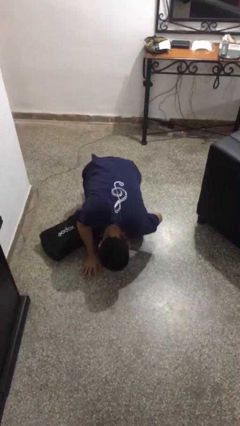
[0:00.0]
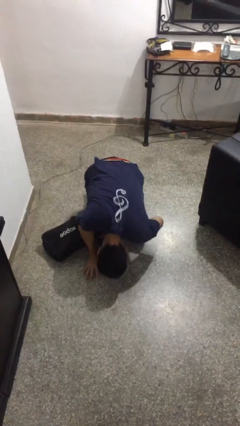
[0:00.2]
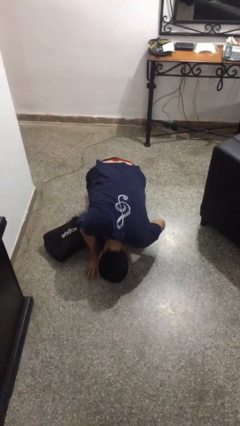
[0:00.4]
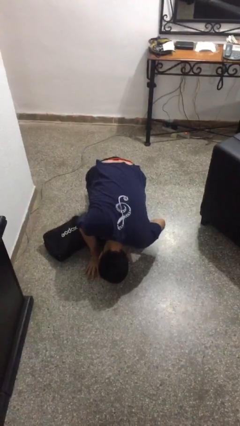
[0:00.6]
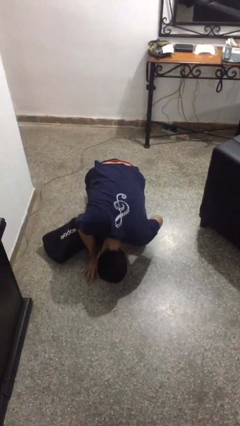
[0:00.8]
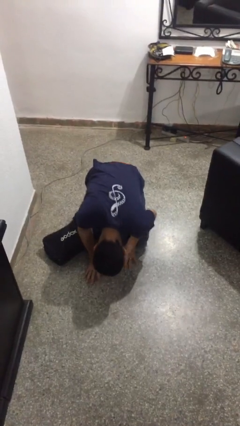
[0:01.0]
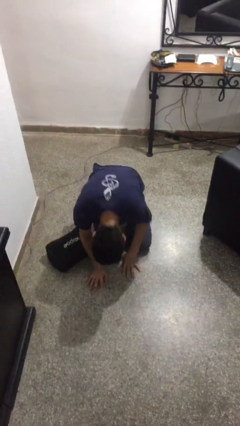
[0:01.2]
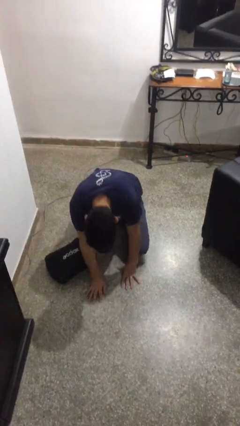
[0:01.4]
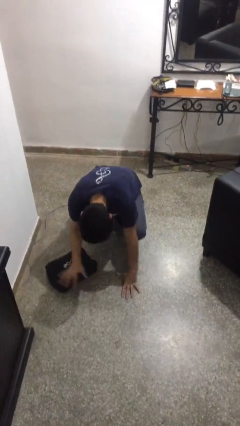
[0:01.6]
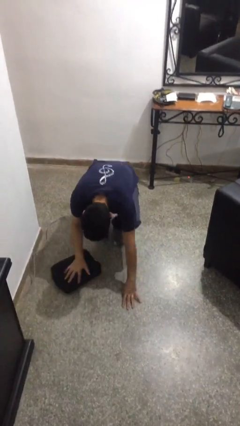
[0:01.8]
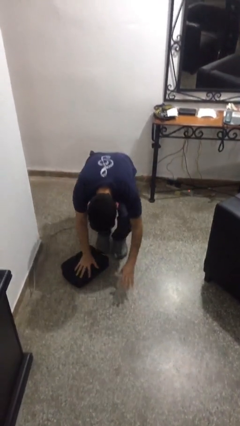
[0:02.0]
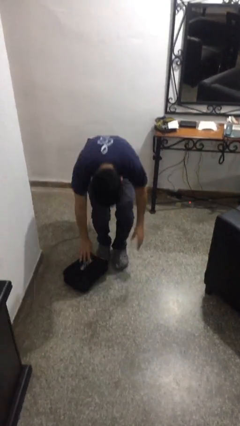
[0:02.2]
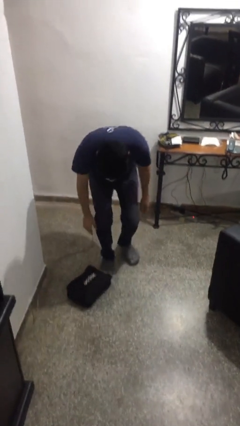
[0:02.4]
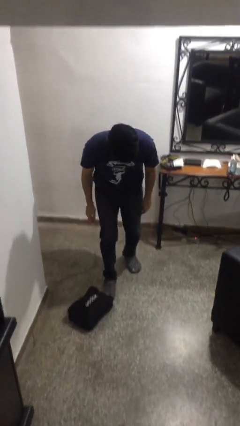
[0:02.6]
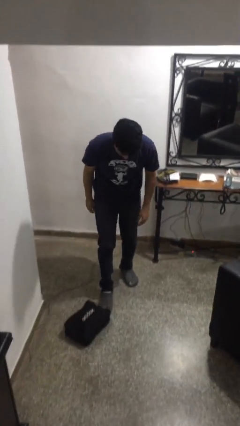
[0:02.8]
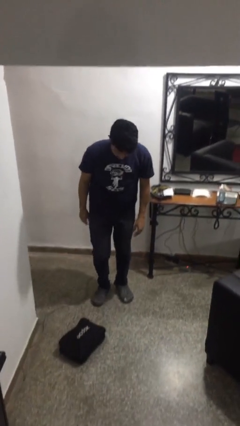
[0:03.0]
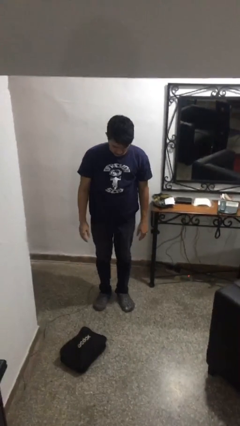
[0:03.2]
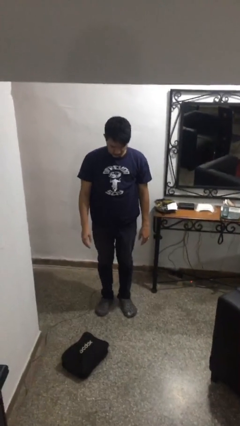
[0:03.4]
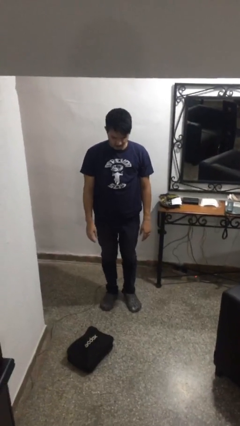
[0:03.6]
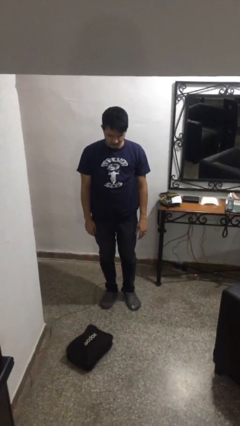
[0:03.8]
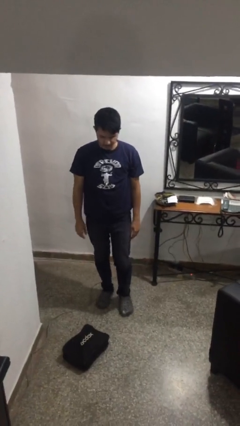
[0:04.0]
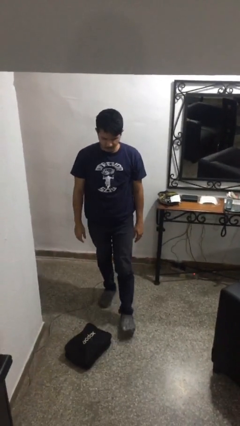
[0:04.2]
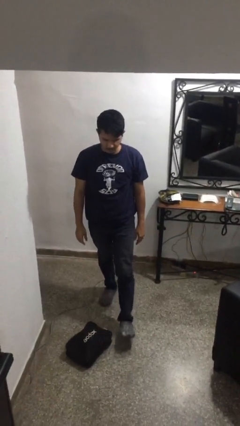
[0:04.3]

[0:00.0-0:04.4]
person stands up from floor

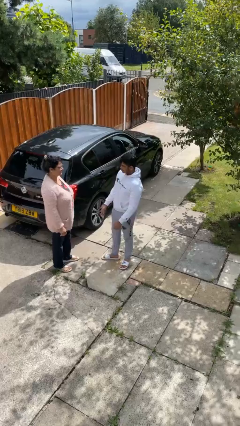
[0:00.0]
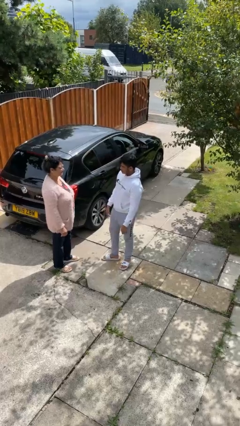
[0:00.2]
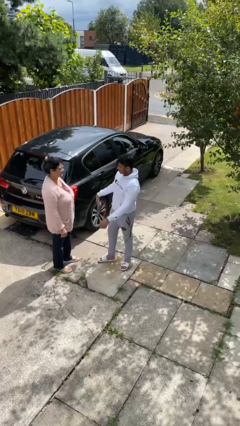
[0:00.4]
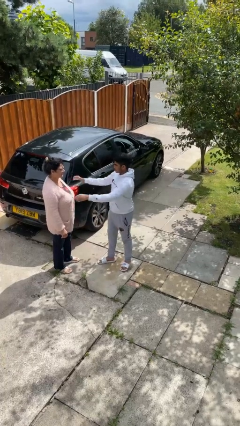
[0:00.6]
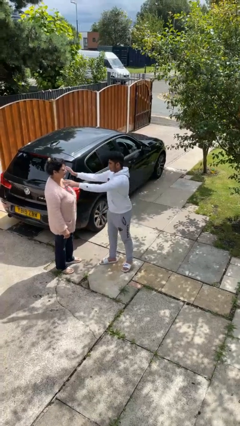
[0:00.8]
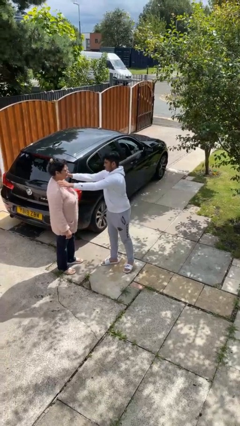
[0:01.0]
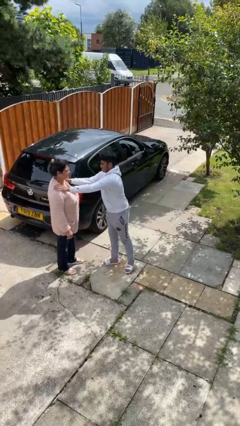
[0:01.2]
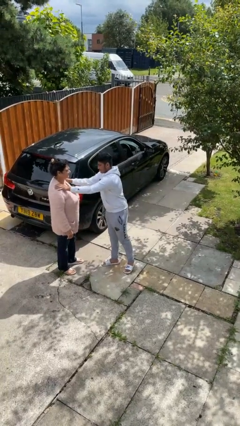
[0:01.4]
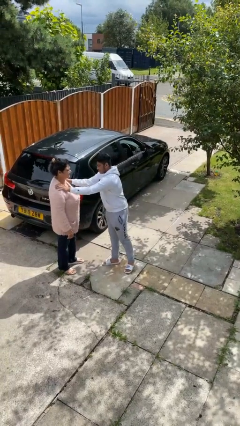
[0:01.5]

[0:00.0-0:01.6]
person pounds shoulders of person

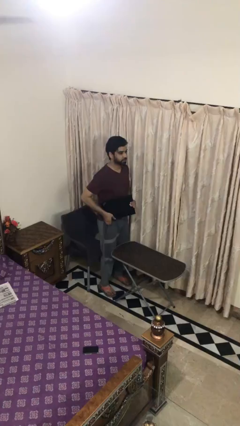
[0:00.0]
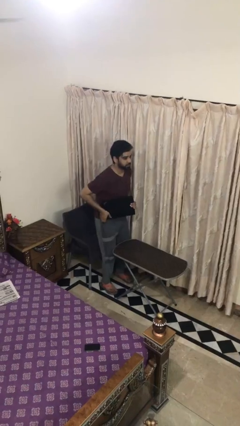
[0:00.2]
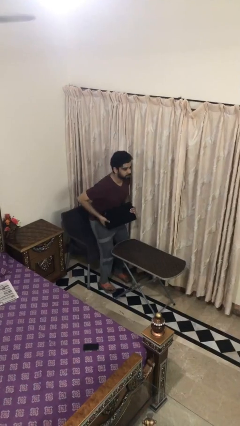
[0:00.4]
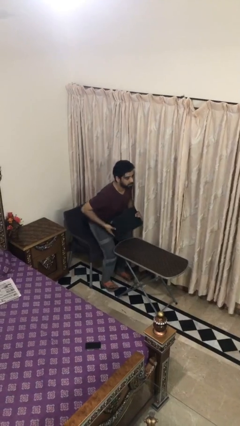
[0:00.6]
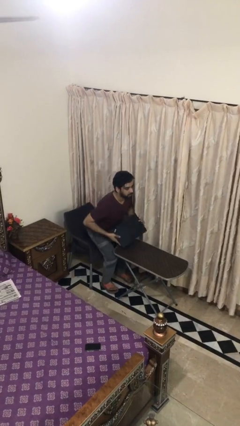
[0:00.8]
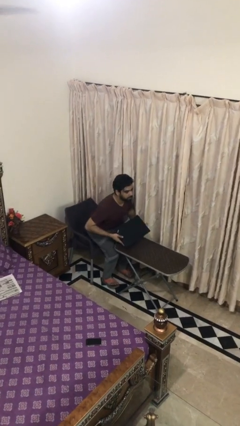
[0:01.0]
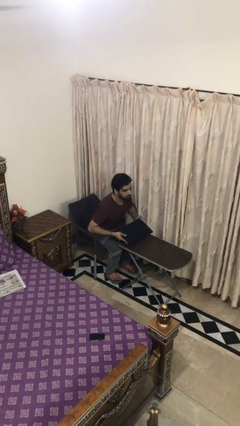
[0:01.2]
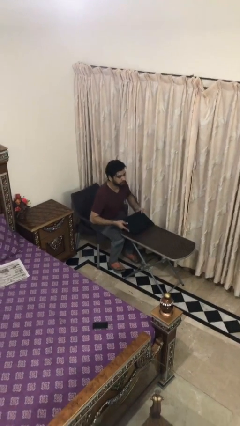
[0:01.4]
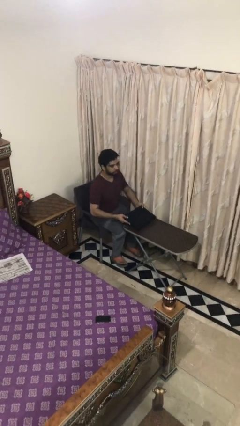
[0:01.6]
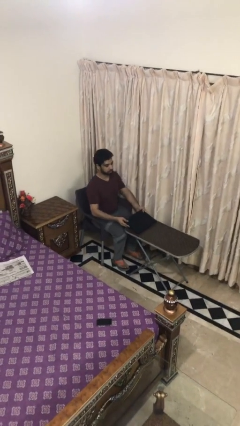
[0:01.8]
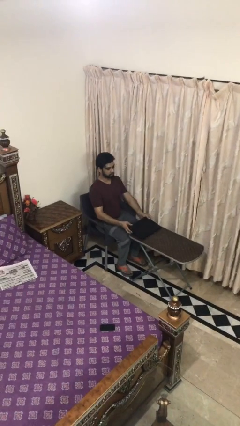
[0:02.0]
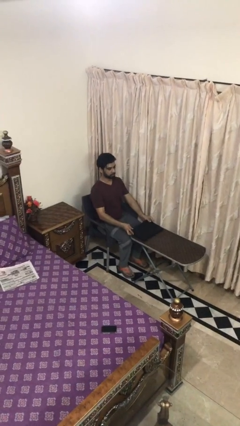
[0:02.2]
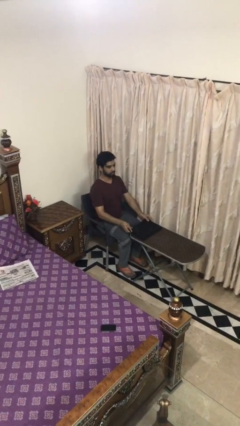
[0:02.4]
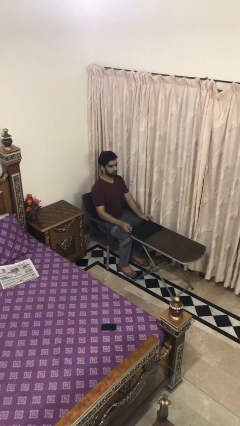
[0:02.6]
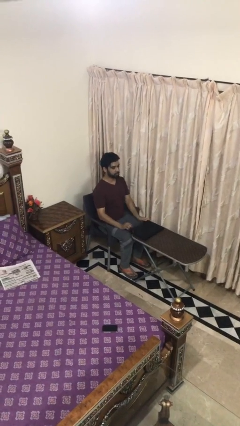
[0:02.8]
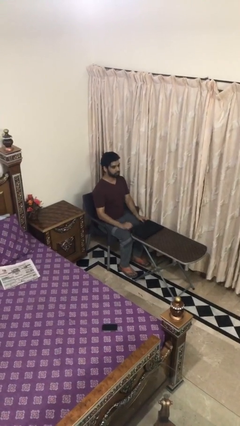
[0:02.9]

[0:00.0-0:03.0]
person sits down

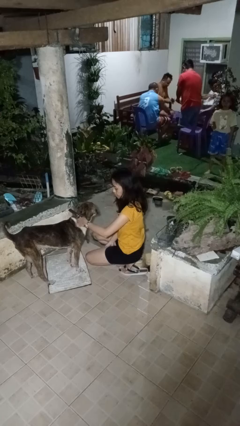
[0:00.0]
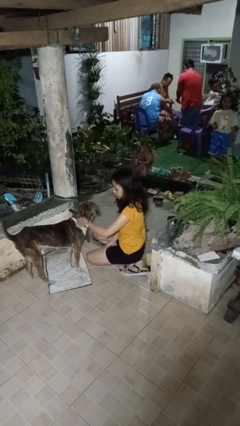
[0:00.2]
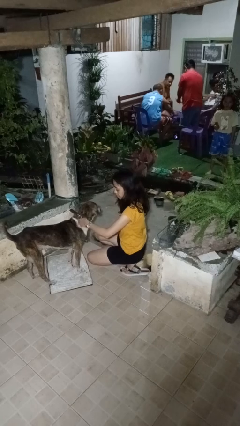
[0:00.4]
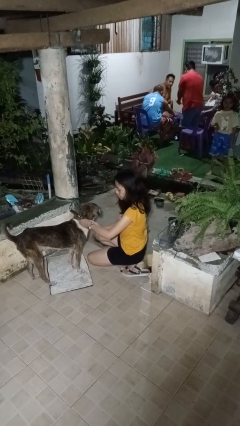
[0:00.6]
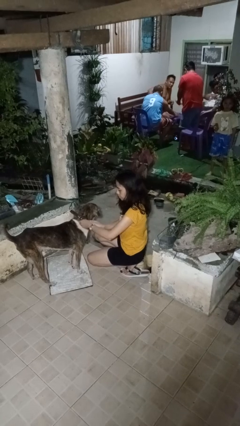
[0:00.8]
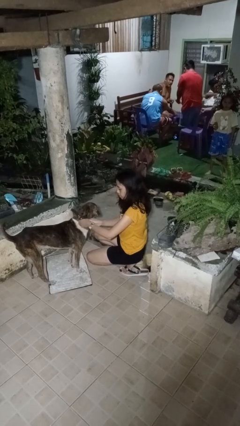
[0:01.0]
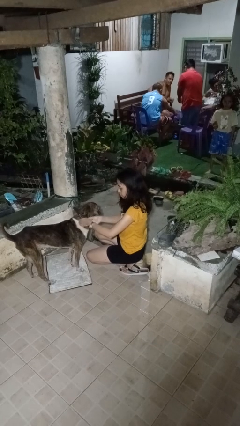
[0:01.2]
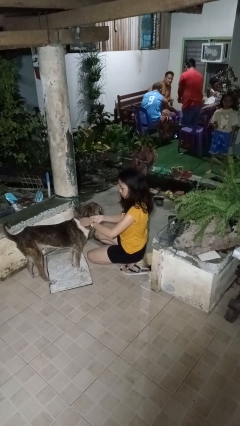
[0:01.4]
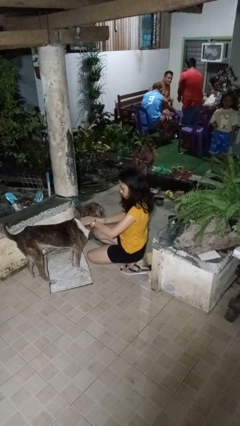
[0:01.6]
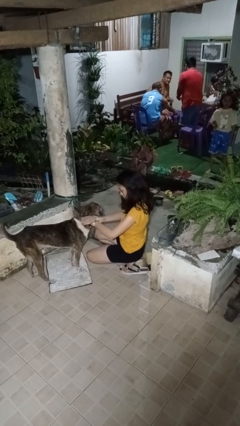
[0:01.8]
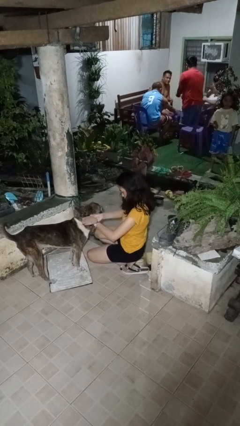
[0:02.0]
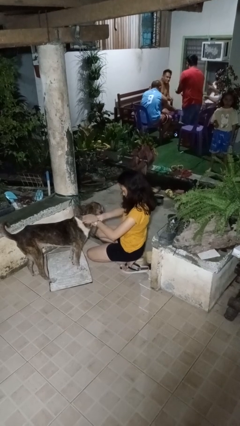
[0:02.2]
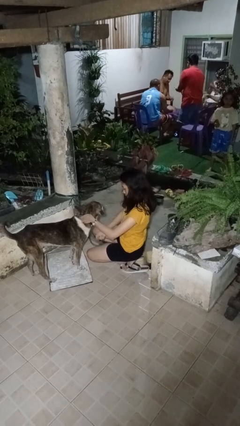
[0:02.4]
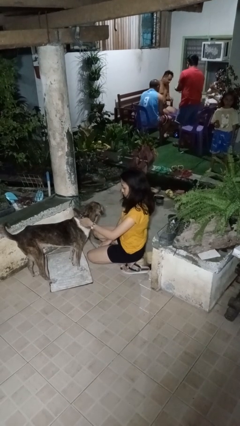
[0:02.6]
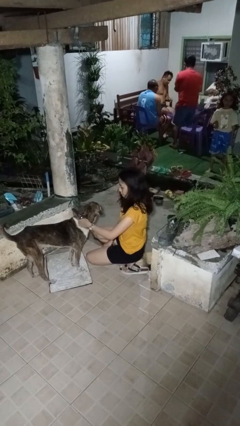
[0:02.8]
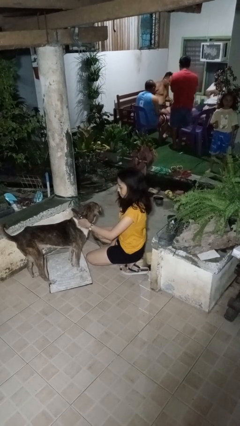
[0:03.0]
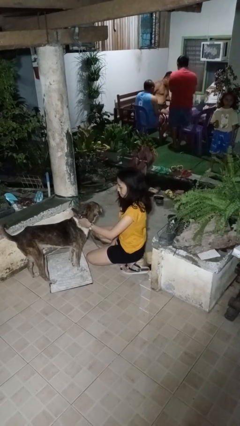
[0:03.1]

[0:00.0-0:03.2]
person unattaches leash from dog

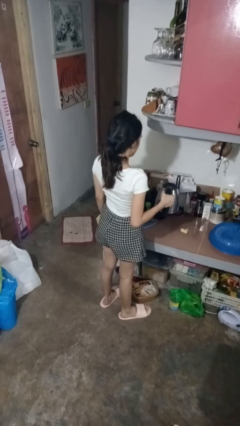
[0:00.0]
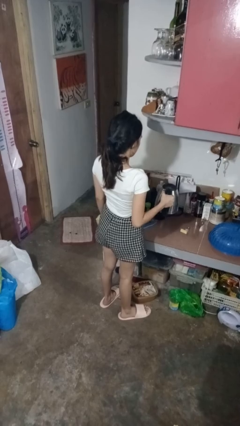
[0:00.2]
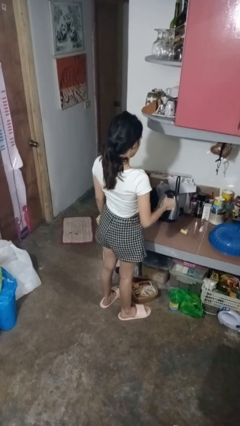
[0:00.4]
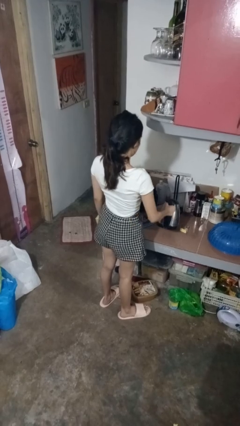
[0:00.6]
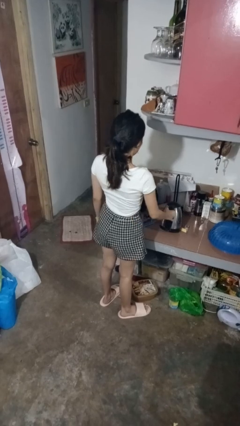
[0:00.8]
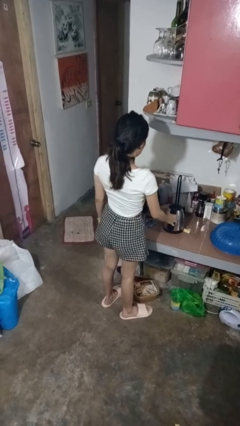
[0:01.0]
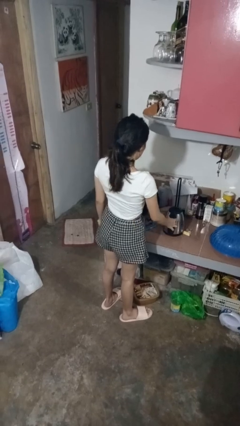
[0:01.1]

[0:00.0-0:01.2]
person puts down object on countertop

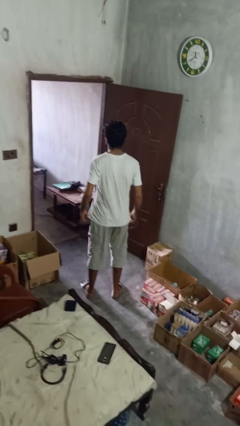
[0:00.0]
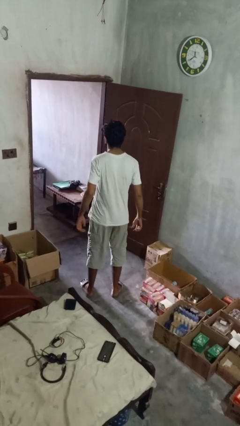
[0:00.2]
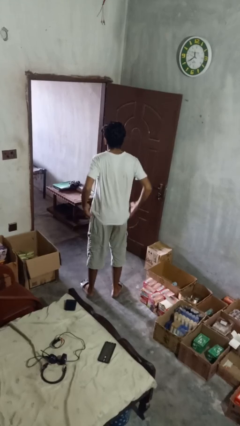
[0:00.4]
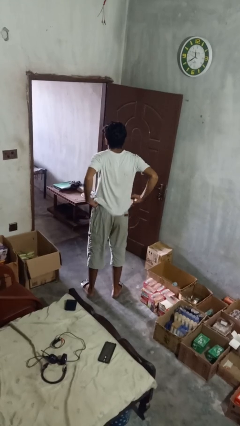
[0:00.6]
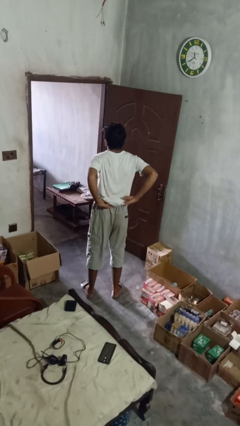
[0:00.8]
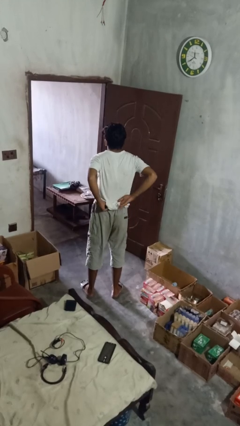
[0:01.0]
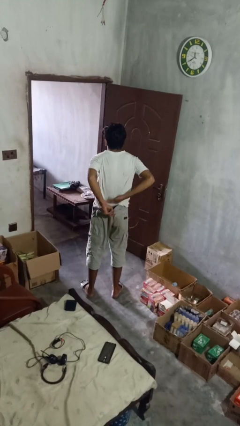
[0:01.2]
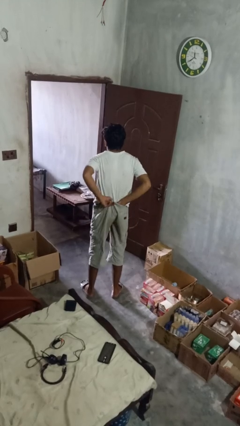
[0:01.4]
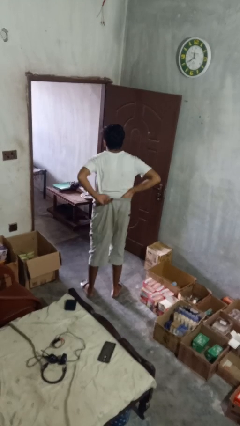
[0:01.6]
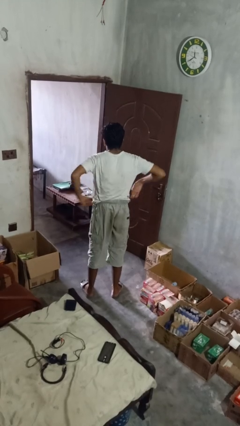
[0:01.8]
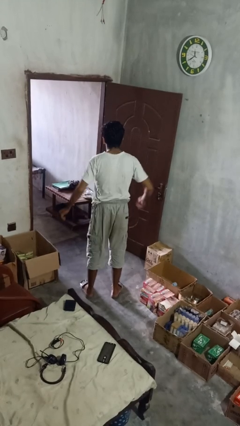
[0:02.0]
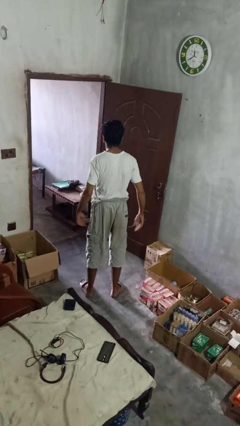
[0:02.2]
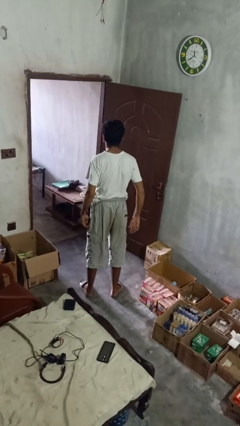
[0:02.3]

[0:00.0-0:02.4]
person tucks in shirt

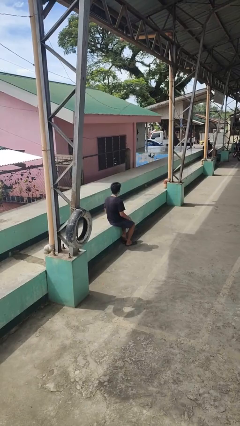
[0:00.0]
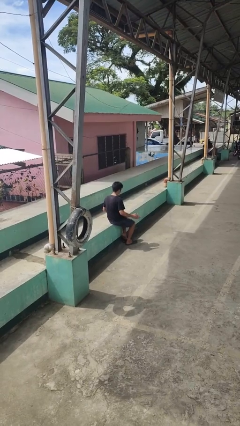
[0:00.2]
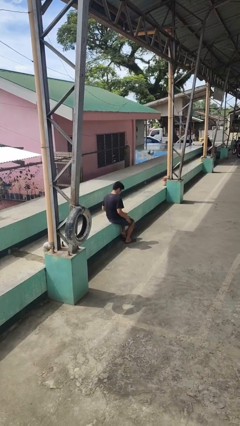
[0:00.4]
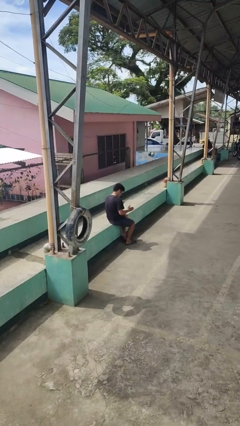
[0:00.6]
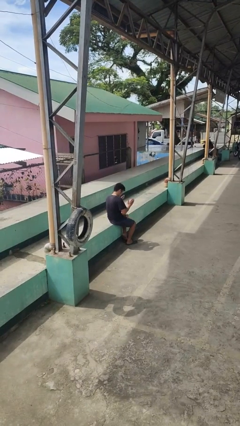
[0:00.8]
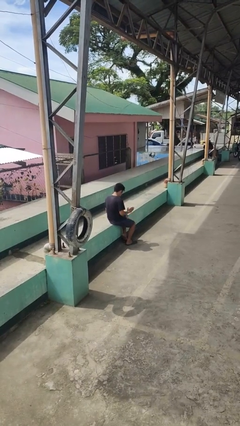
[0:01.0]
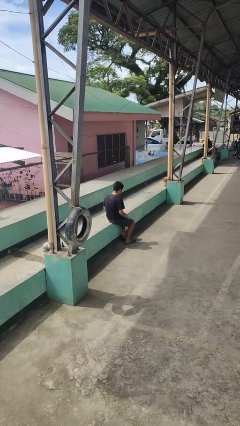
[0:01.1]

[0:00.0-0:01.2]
person slaps hands on thighs

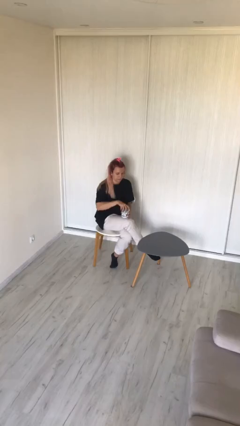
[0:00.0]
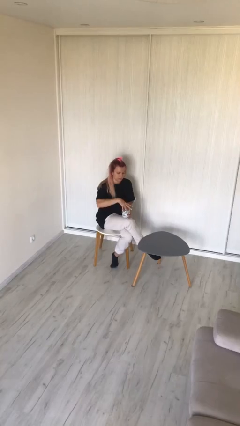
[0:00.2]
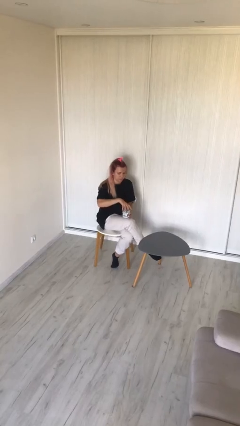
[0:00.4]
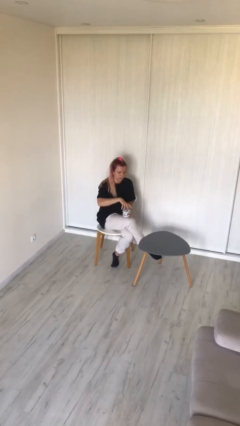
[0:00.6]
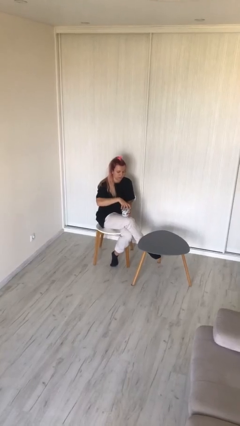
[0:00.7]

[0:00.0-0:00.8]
person opens jar
